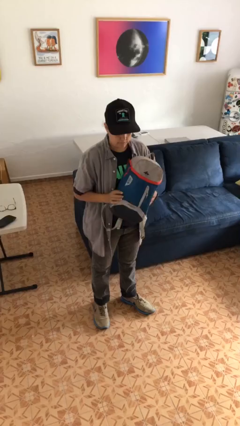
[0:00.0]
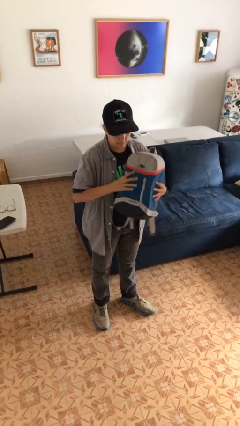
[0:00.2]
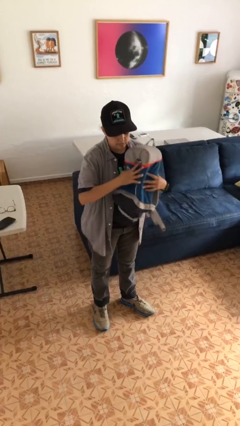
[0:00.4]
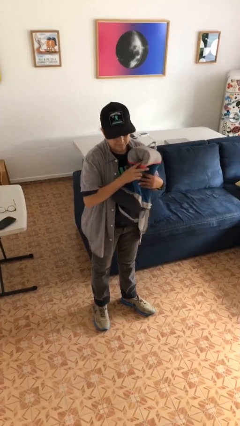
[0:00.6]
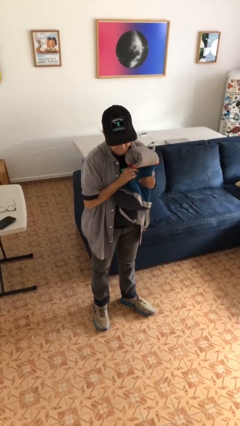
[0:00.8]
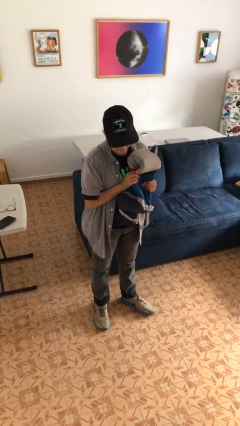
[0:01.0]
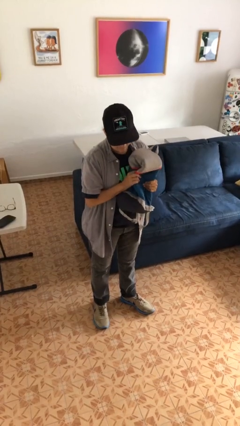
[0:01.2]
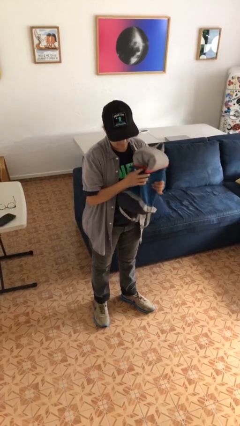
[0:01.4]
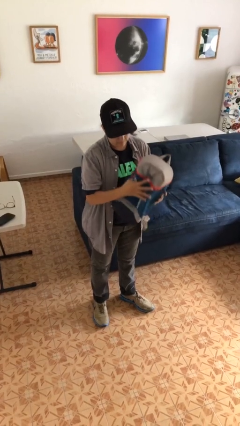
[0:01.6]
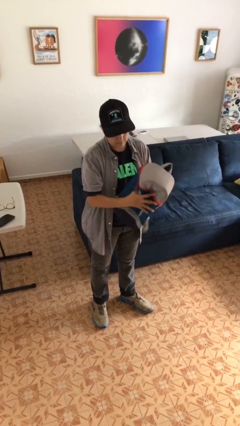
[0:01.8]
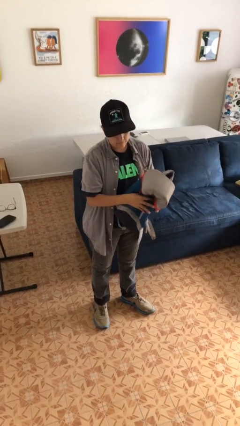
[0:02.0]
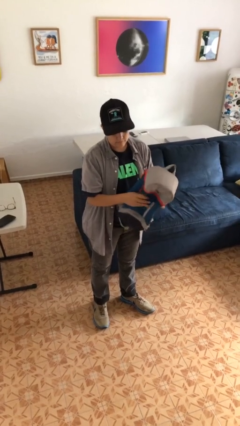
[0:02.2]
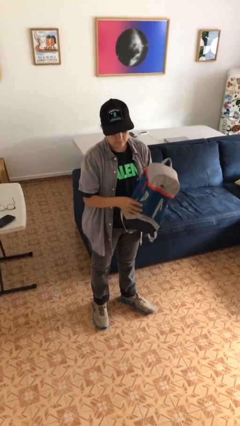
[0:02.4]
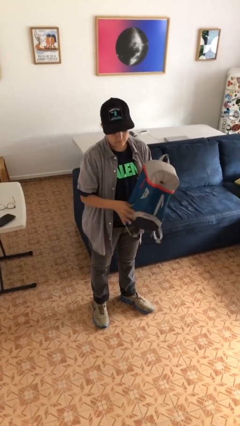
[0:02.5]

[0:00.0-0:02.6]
person squeezes object

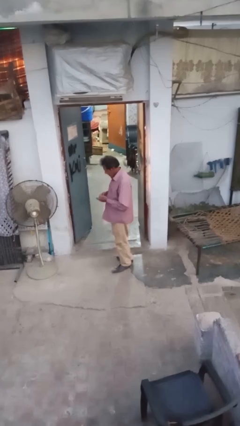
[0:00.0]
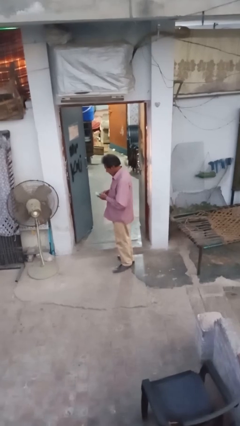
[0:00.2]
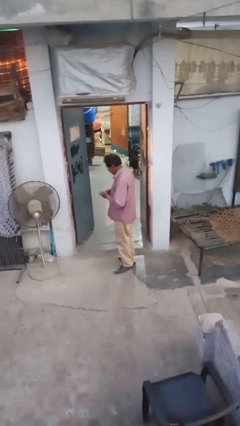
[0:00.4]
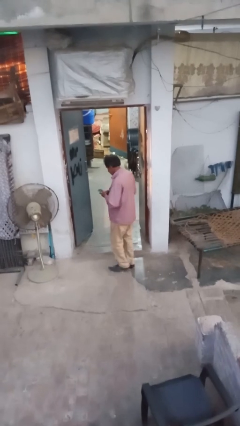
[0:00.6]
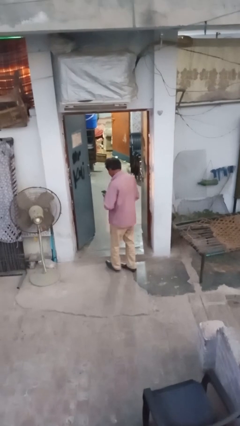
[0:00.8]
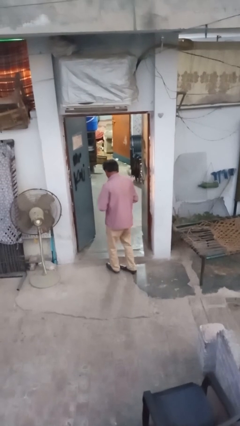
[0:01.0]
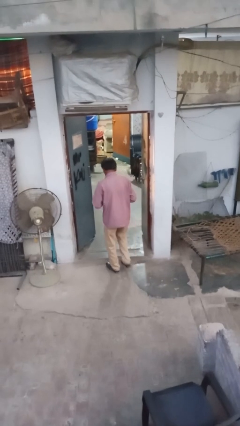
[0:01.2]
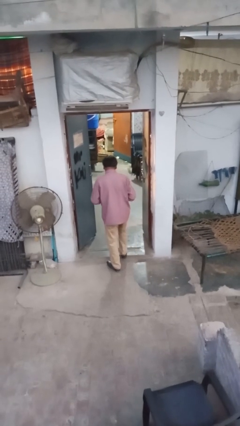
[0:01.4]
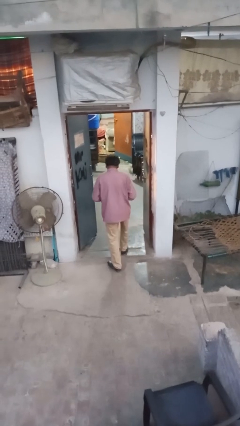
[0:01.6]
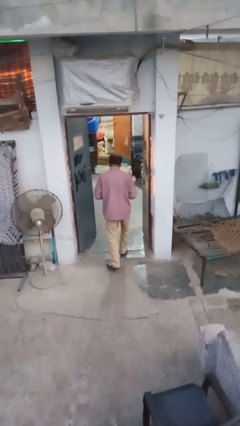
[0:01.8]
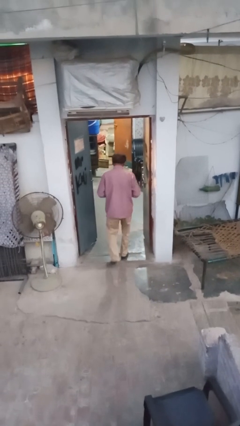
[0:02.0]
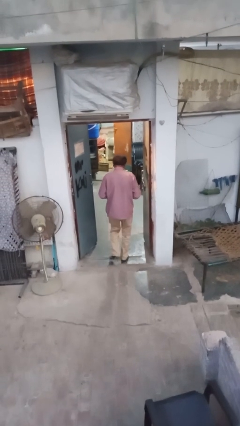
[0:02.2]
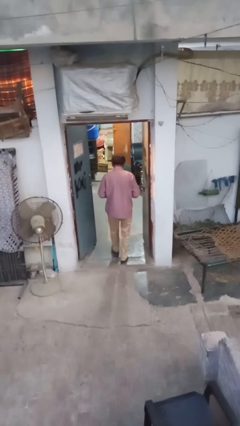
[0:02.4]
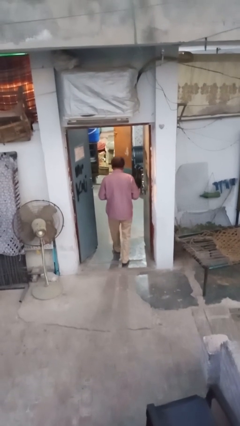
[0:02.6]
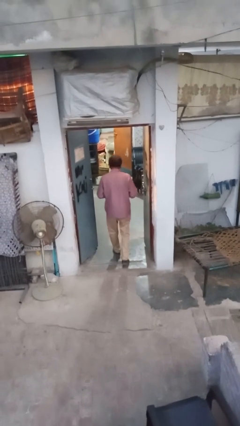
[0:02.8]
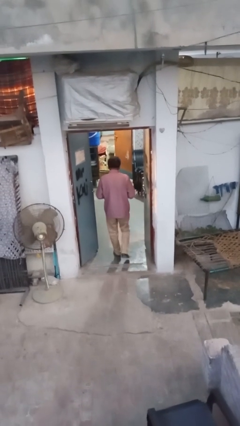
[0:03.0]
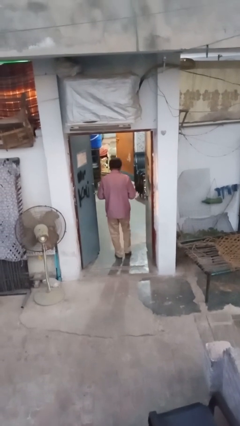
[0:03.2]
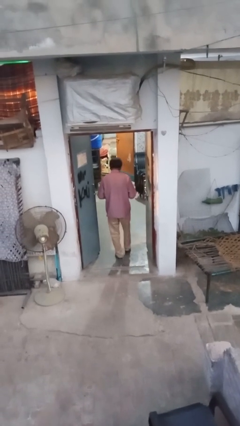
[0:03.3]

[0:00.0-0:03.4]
person exits scene through structure

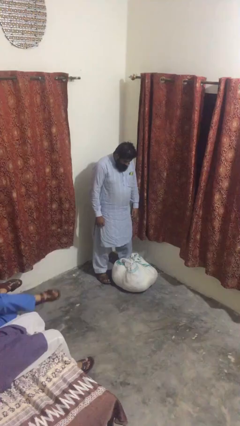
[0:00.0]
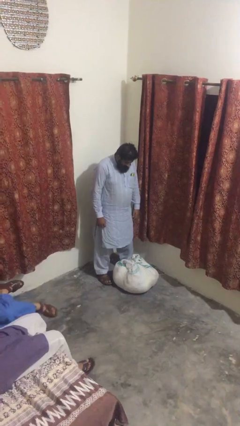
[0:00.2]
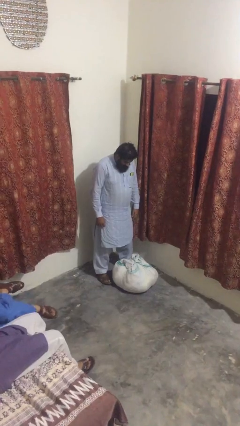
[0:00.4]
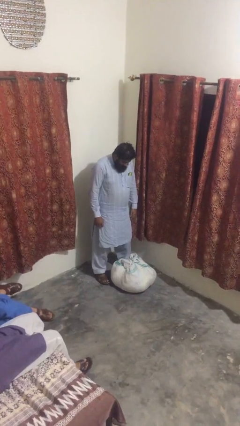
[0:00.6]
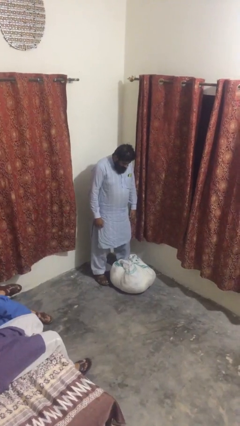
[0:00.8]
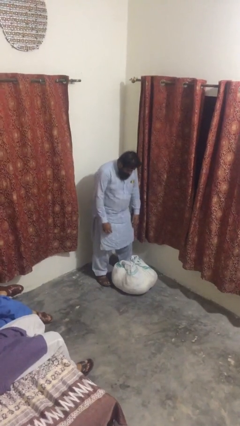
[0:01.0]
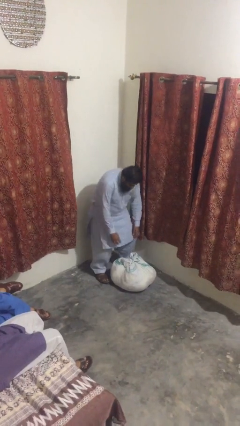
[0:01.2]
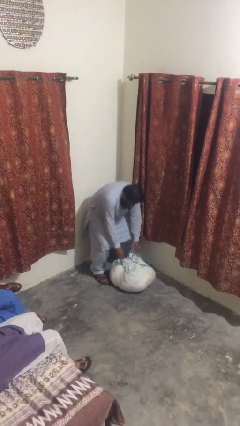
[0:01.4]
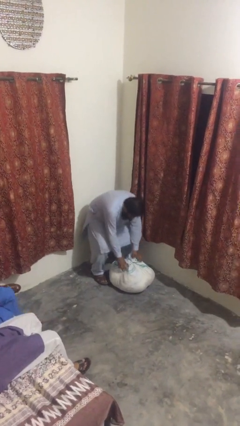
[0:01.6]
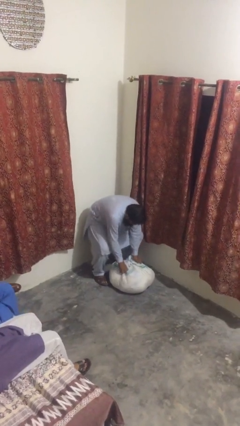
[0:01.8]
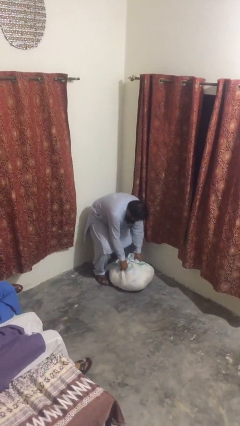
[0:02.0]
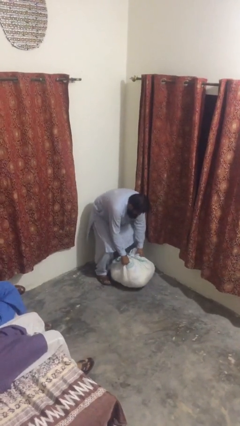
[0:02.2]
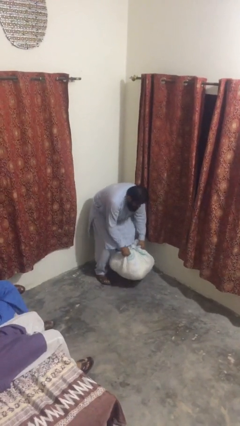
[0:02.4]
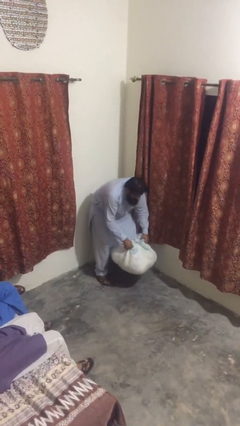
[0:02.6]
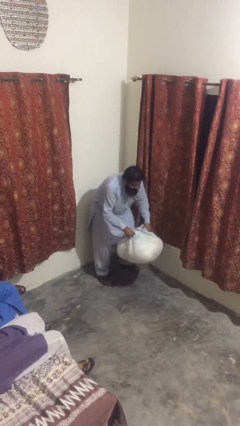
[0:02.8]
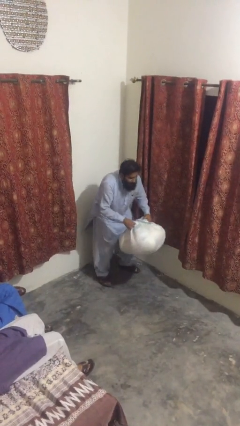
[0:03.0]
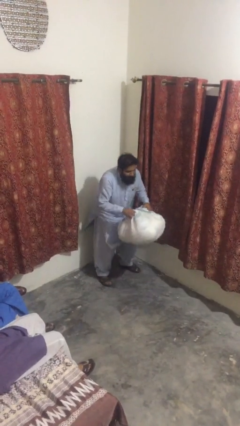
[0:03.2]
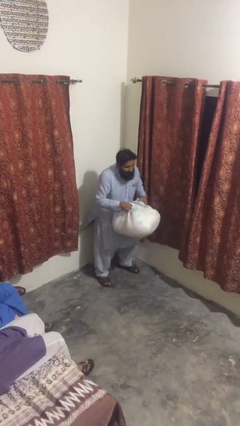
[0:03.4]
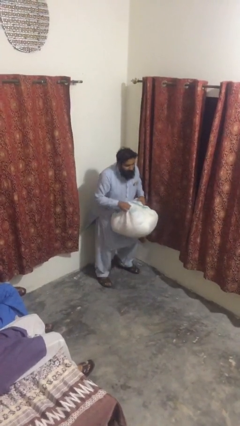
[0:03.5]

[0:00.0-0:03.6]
person picks up object from floor

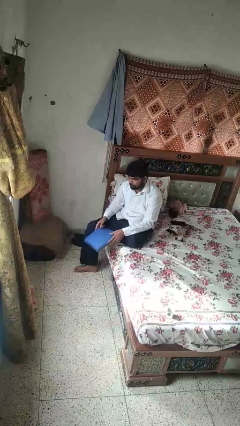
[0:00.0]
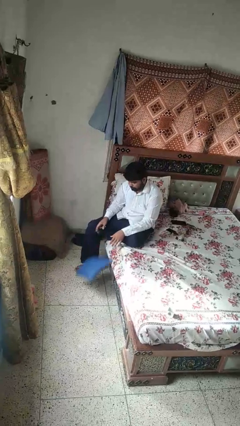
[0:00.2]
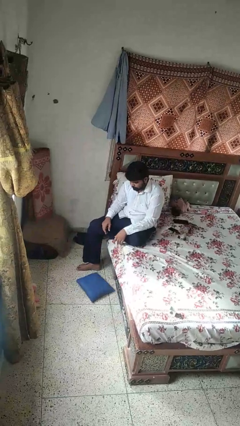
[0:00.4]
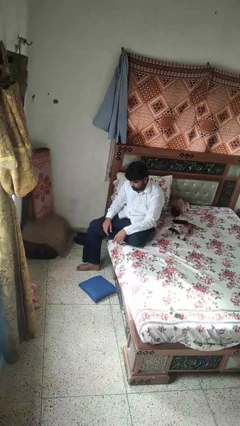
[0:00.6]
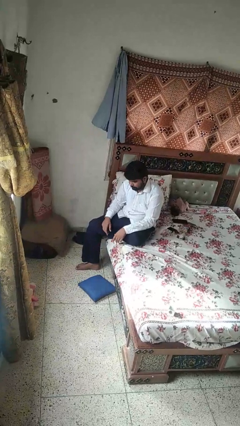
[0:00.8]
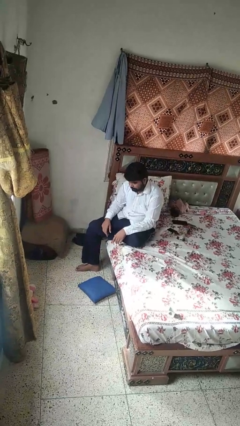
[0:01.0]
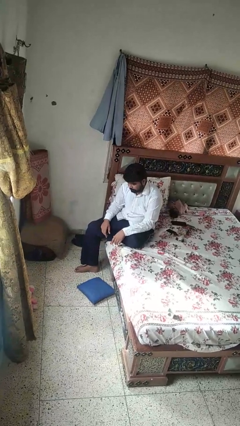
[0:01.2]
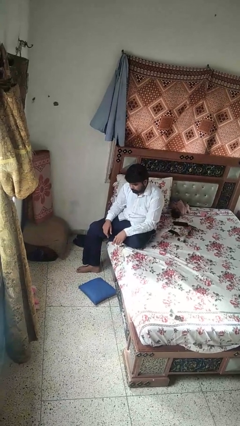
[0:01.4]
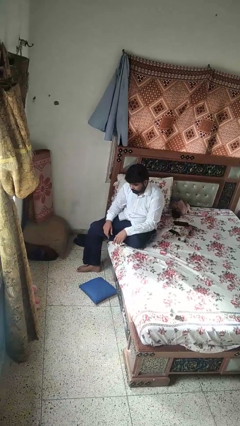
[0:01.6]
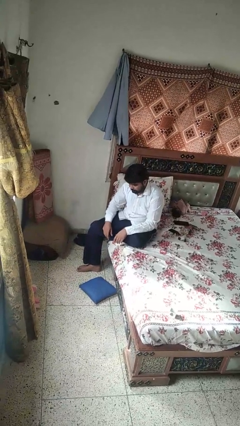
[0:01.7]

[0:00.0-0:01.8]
person drops object

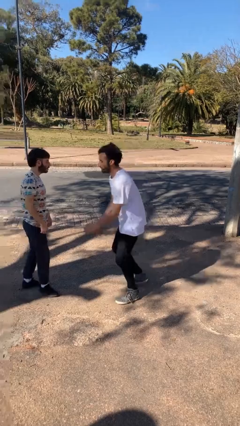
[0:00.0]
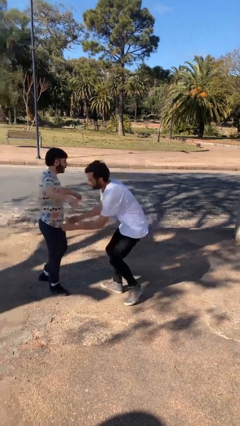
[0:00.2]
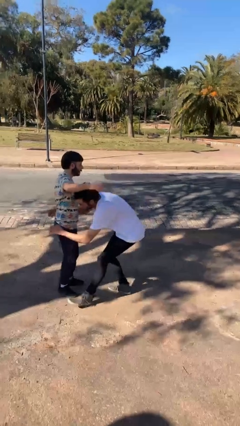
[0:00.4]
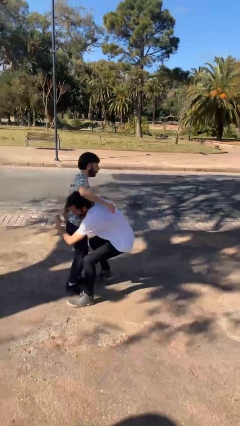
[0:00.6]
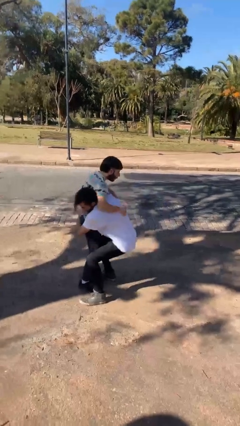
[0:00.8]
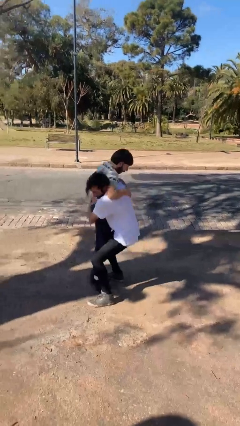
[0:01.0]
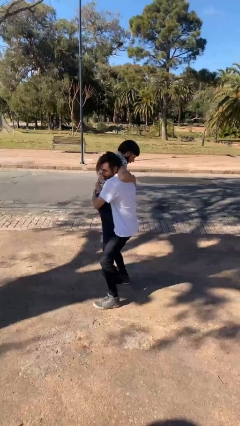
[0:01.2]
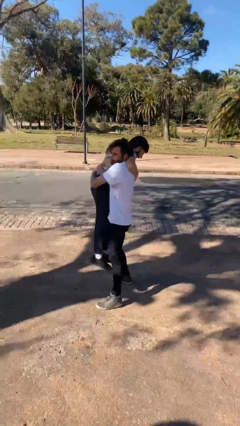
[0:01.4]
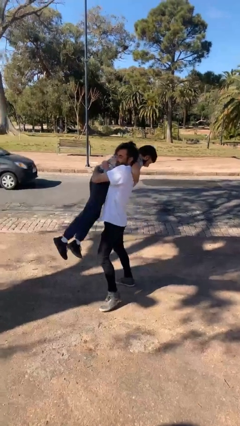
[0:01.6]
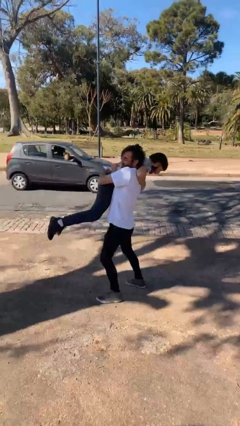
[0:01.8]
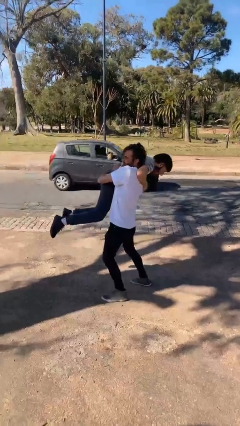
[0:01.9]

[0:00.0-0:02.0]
person carries person over shoulder

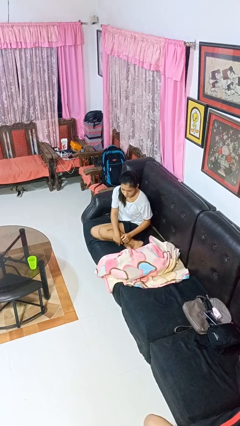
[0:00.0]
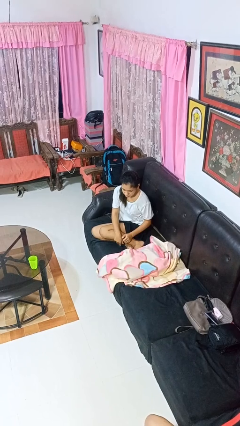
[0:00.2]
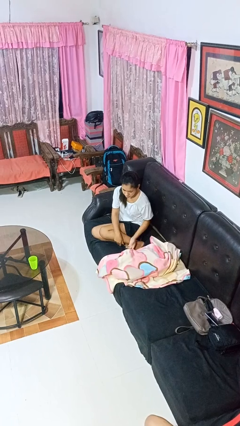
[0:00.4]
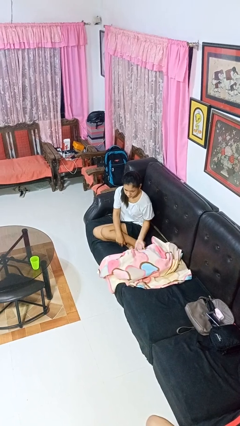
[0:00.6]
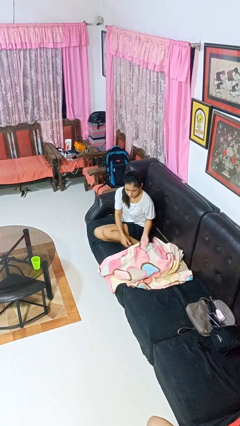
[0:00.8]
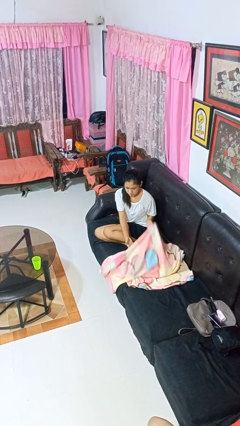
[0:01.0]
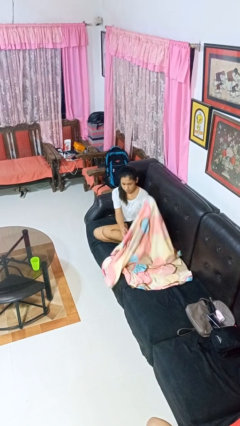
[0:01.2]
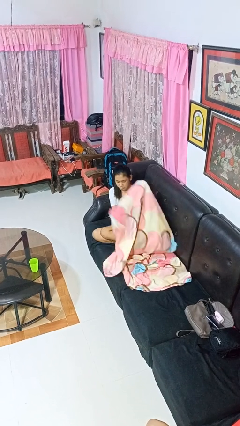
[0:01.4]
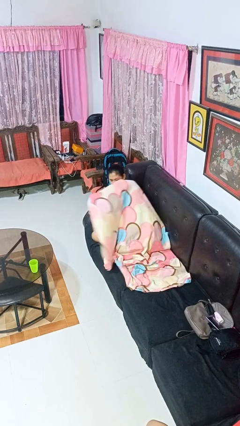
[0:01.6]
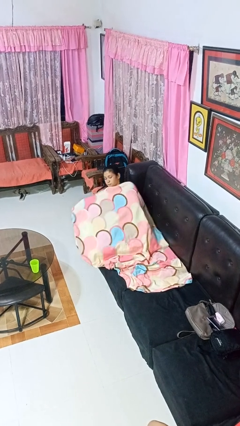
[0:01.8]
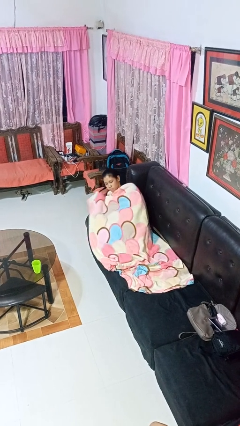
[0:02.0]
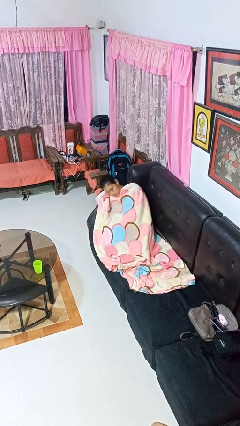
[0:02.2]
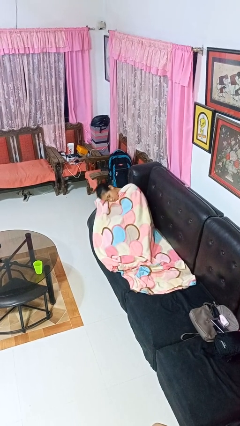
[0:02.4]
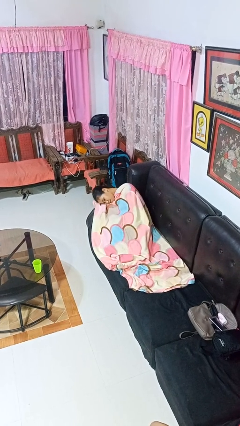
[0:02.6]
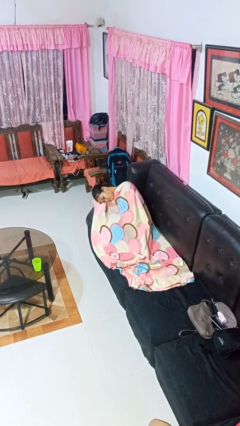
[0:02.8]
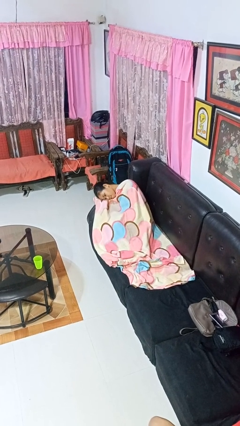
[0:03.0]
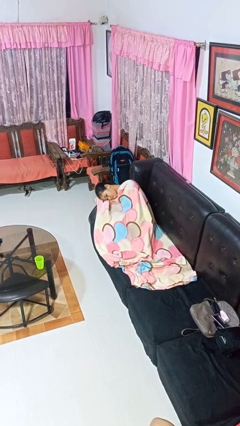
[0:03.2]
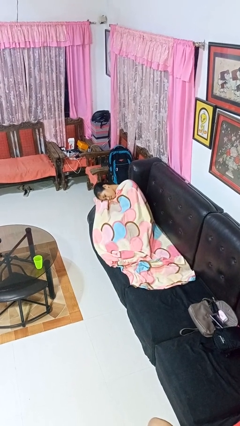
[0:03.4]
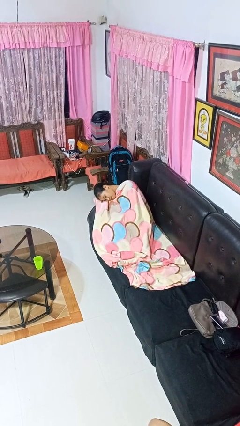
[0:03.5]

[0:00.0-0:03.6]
person covers with blanket

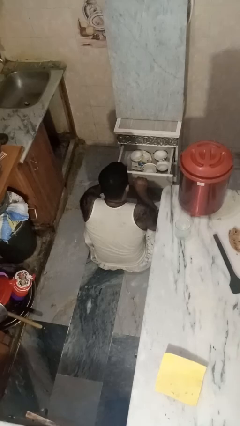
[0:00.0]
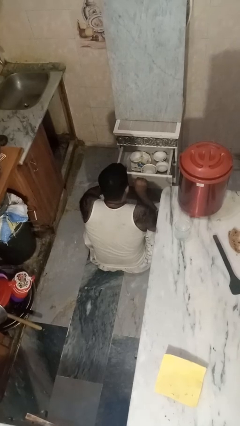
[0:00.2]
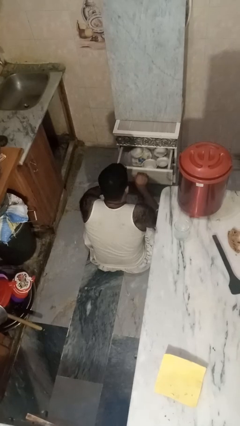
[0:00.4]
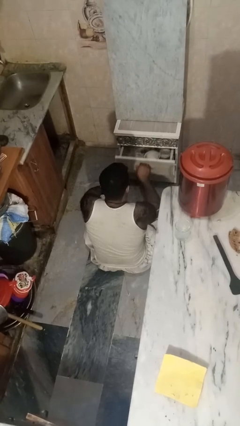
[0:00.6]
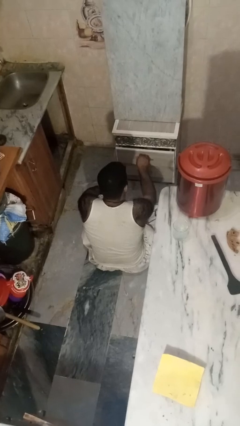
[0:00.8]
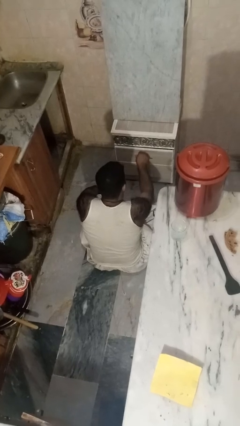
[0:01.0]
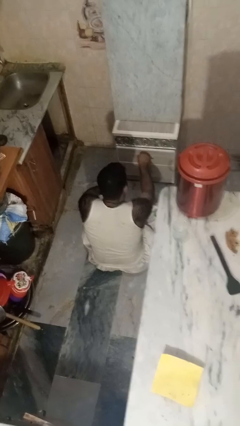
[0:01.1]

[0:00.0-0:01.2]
person closes kitchen drawer
